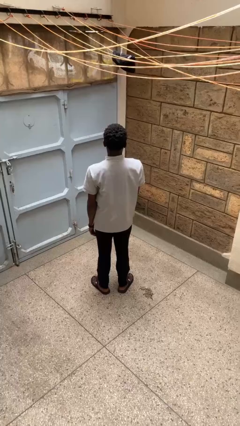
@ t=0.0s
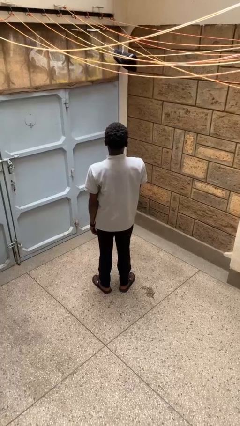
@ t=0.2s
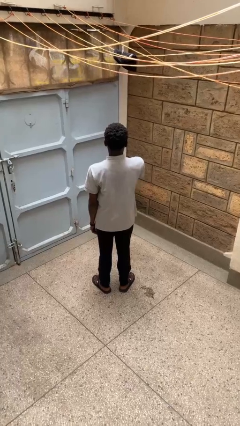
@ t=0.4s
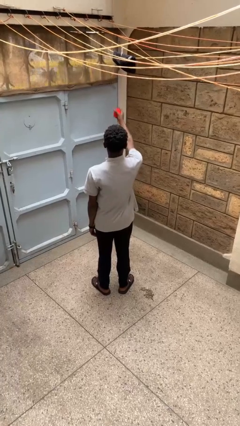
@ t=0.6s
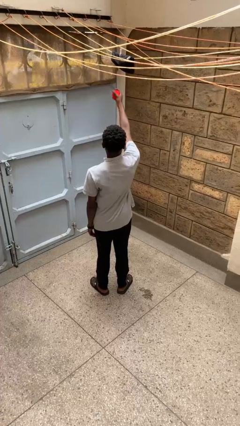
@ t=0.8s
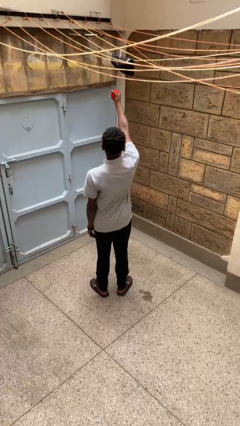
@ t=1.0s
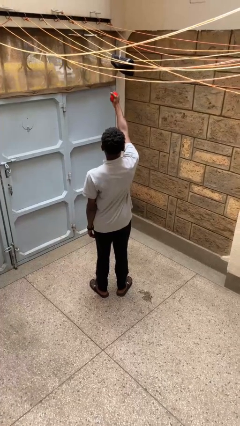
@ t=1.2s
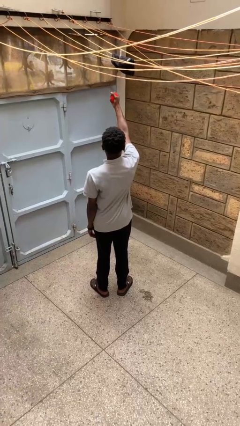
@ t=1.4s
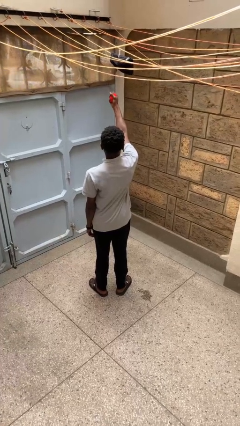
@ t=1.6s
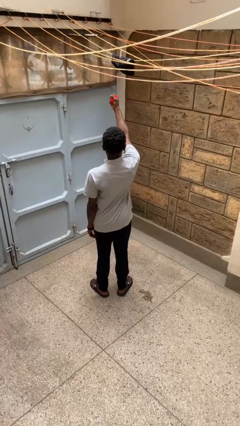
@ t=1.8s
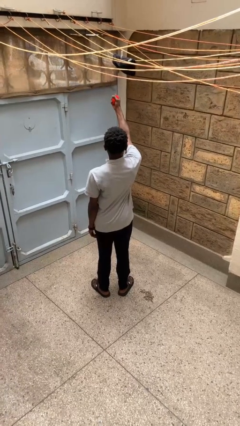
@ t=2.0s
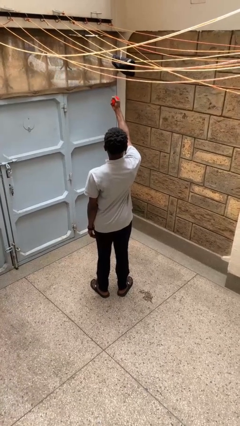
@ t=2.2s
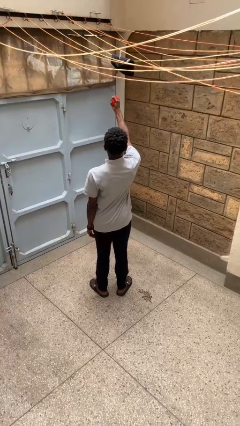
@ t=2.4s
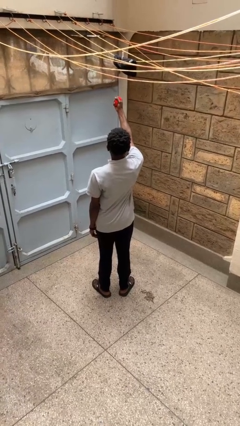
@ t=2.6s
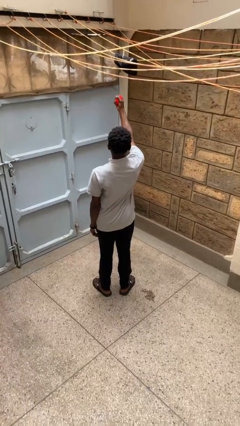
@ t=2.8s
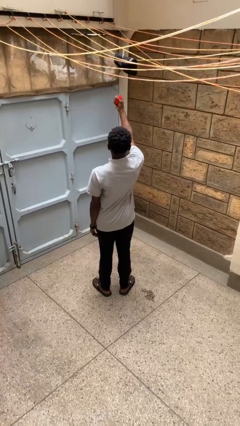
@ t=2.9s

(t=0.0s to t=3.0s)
person squeezes object

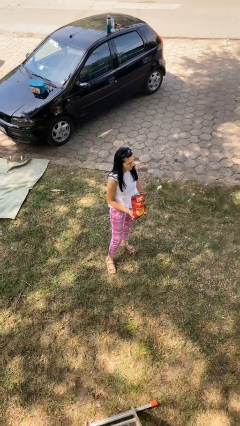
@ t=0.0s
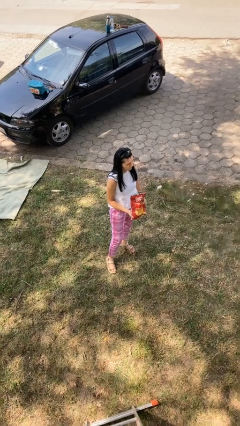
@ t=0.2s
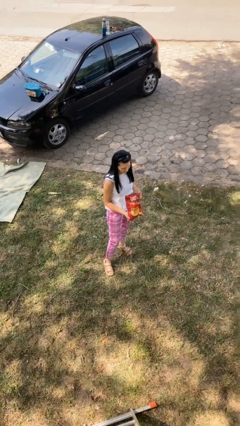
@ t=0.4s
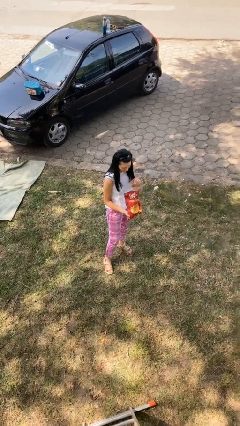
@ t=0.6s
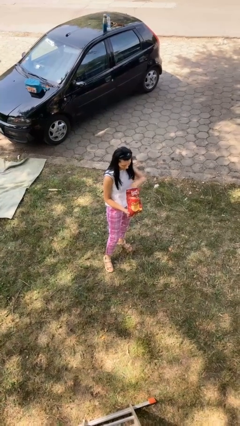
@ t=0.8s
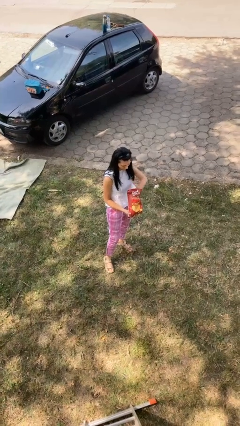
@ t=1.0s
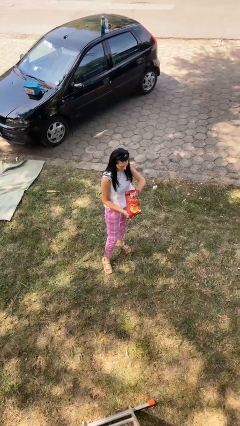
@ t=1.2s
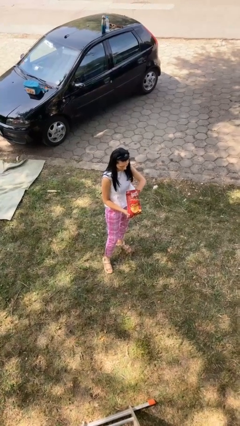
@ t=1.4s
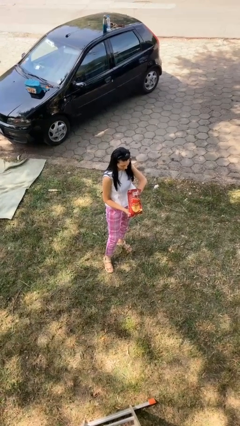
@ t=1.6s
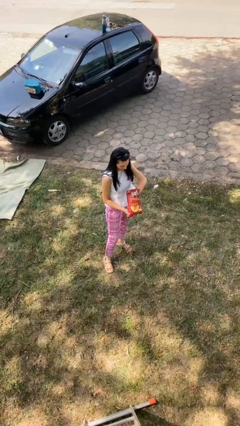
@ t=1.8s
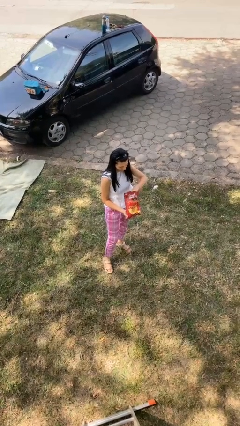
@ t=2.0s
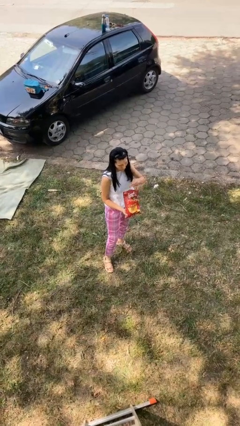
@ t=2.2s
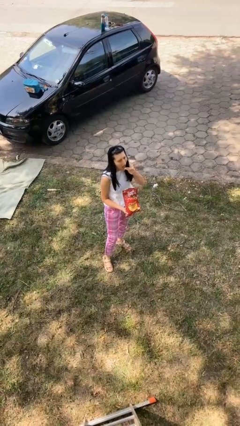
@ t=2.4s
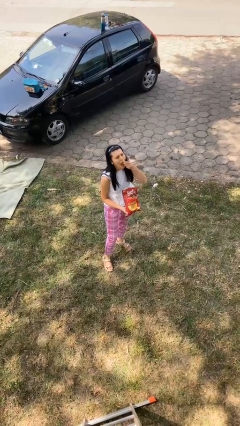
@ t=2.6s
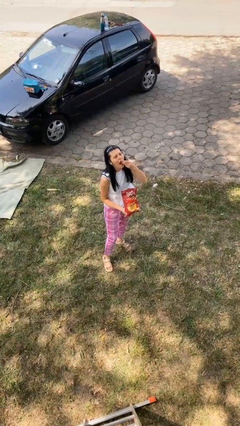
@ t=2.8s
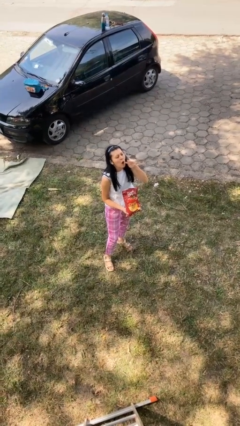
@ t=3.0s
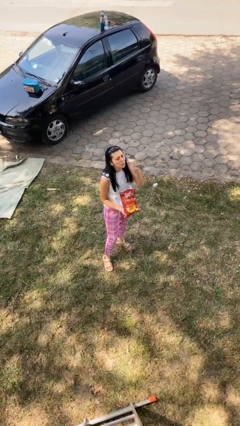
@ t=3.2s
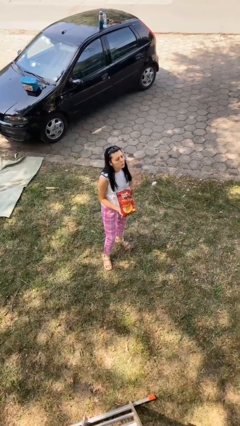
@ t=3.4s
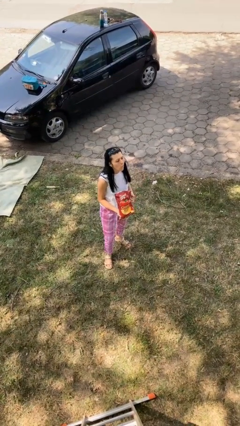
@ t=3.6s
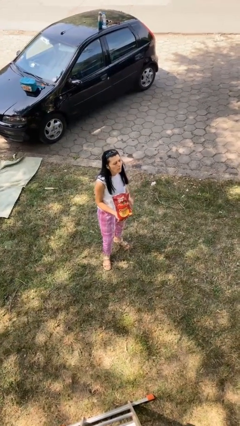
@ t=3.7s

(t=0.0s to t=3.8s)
person eats snack from bag

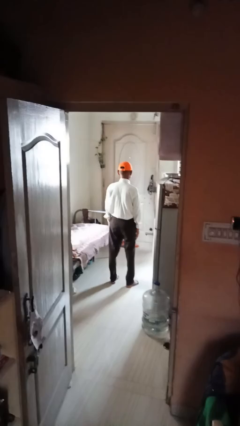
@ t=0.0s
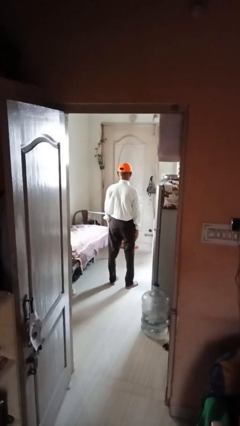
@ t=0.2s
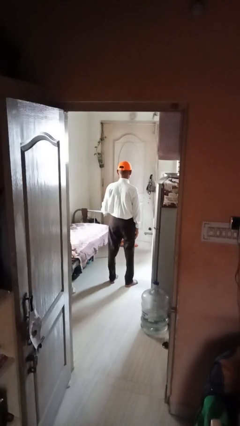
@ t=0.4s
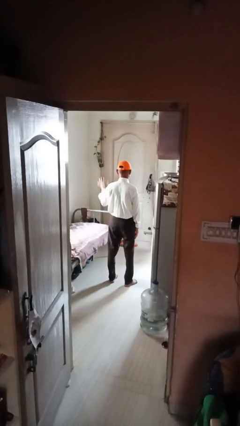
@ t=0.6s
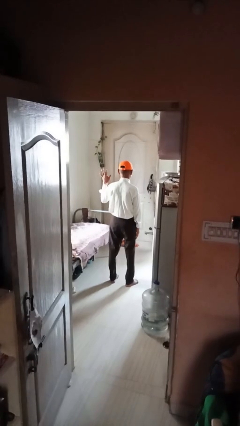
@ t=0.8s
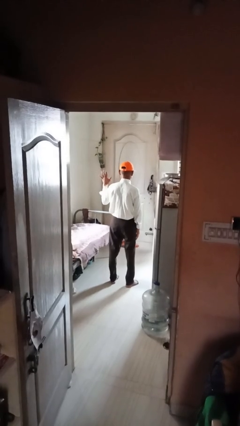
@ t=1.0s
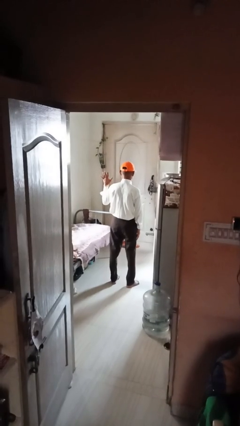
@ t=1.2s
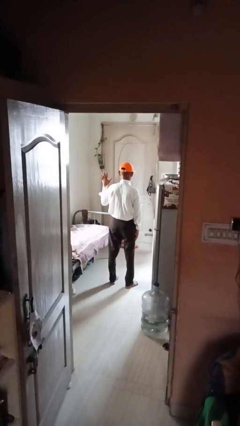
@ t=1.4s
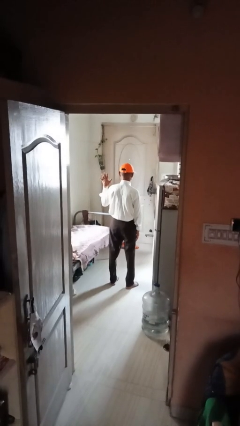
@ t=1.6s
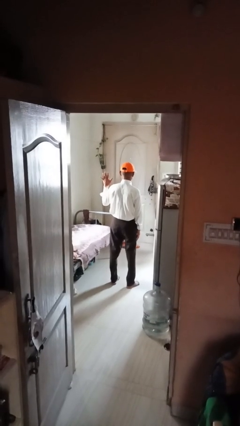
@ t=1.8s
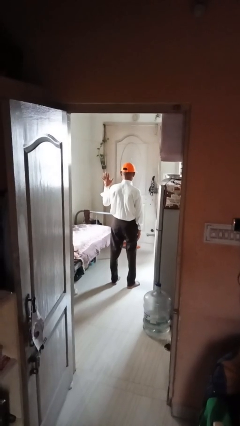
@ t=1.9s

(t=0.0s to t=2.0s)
person gestures number five

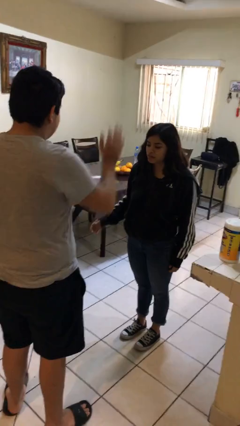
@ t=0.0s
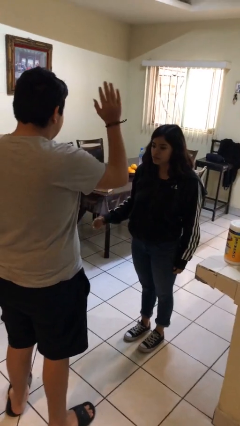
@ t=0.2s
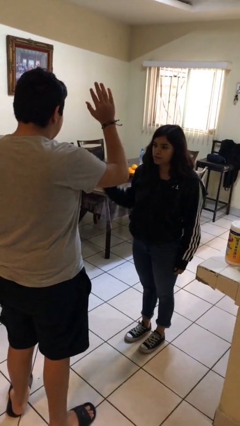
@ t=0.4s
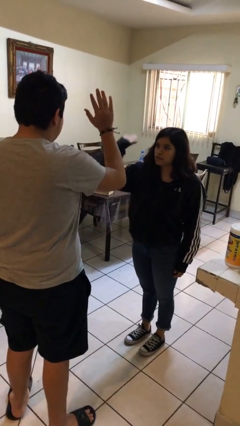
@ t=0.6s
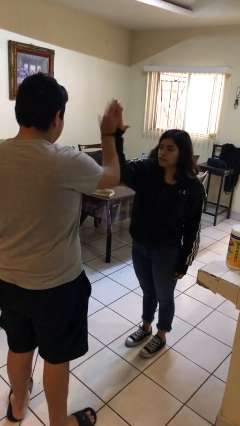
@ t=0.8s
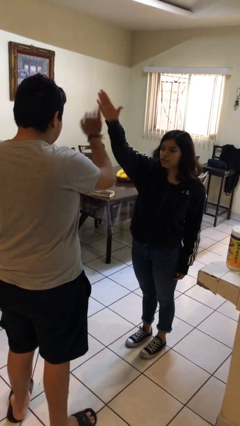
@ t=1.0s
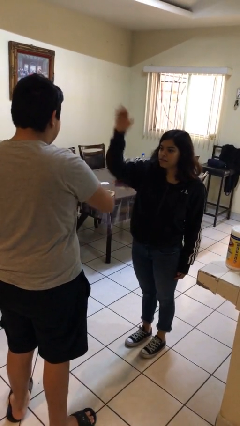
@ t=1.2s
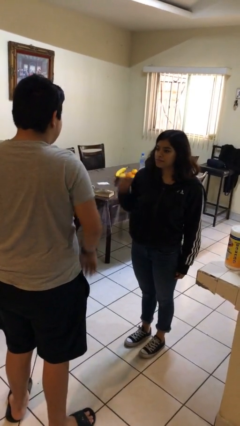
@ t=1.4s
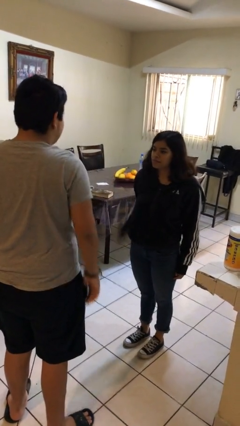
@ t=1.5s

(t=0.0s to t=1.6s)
person highfives hand

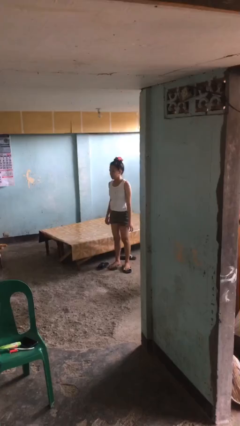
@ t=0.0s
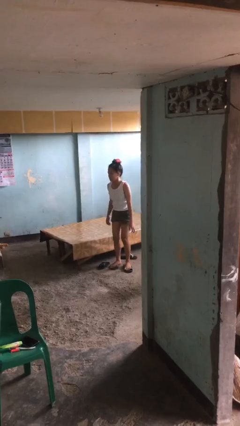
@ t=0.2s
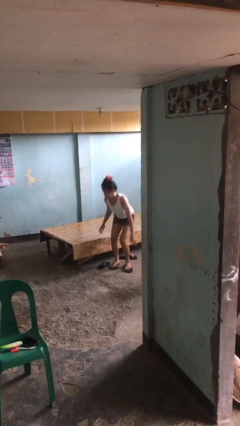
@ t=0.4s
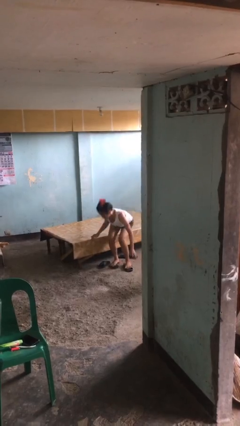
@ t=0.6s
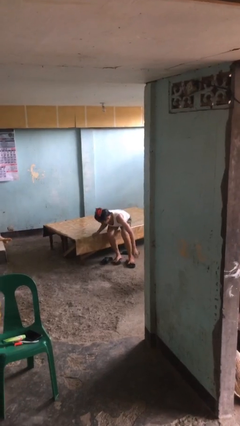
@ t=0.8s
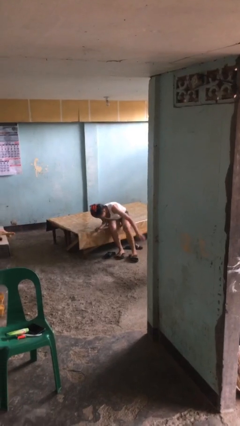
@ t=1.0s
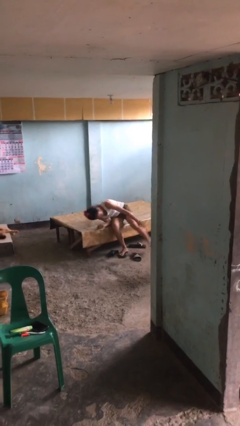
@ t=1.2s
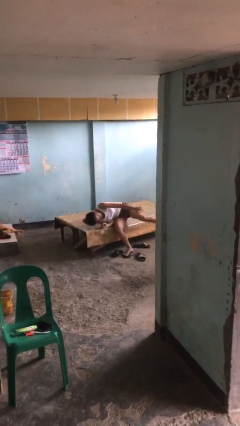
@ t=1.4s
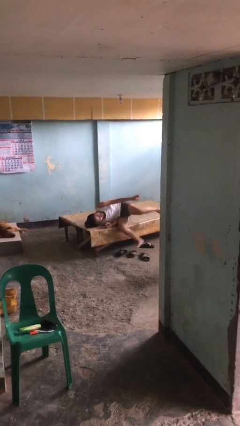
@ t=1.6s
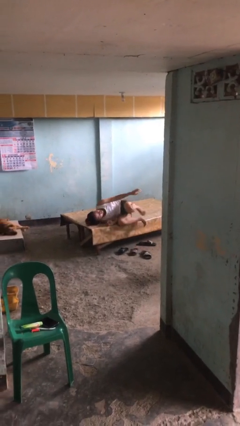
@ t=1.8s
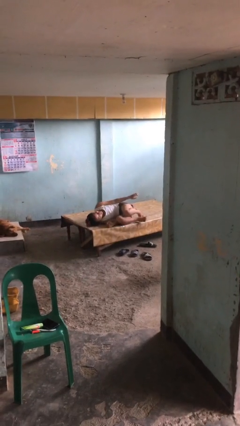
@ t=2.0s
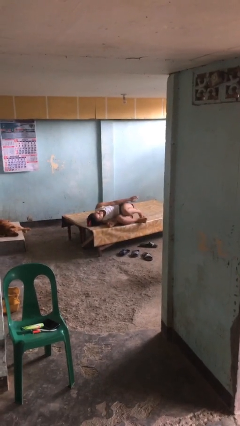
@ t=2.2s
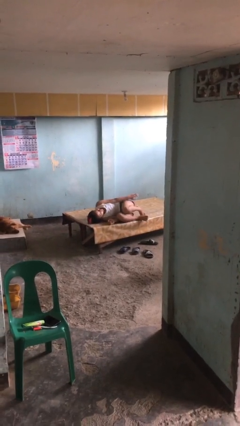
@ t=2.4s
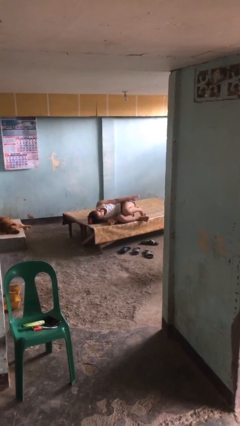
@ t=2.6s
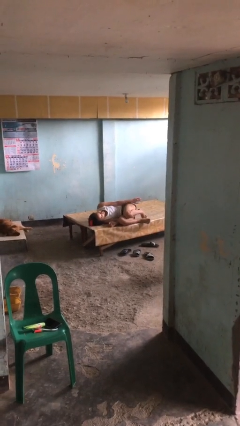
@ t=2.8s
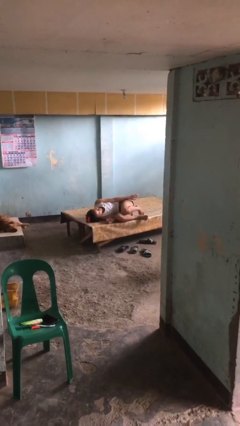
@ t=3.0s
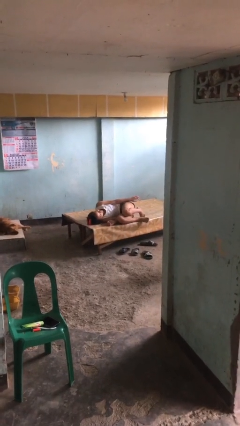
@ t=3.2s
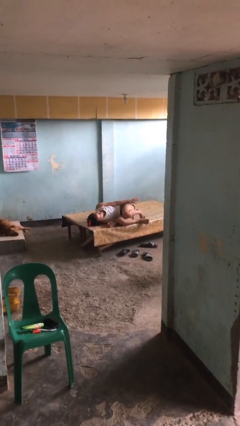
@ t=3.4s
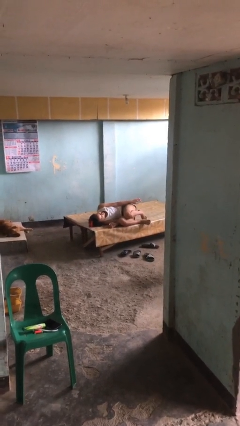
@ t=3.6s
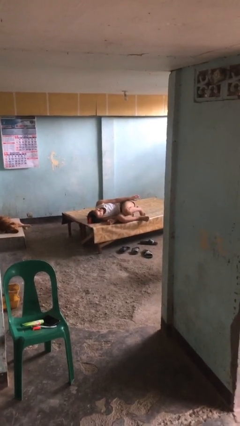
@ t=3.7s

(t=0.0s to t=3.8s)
person lies down on bed

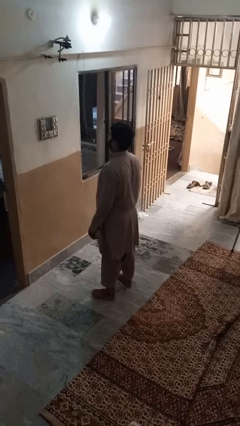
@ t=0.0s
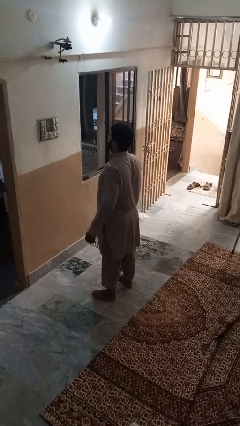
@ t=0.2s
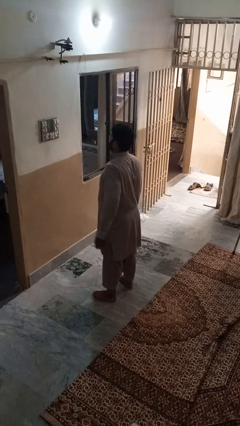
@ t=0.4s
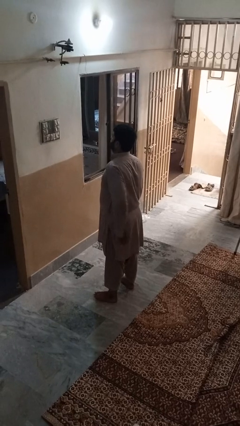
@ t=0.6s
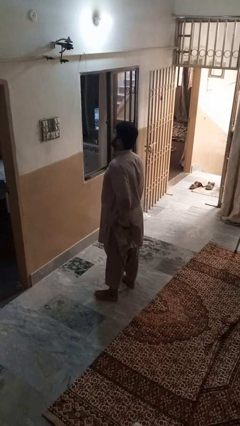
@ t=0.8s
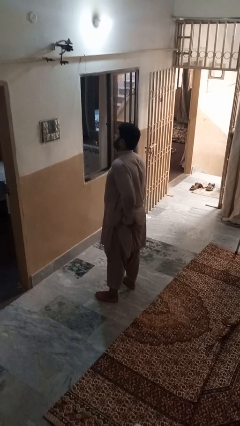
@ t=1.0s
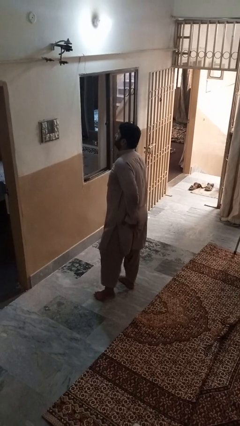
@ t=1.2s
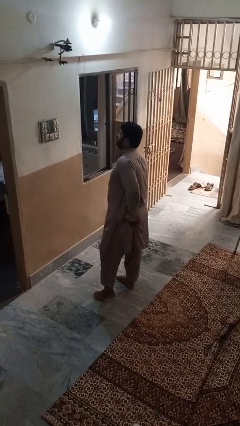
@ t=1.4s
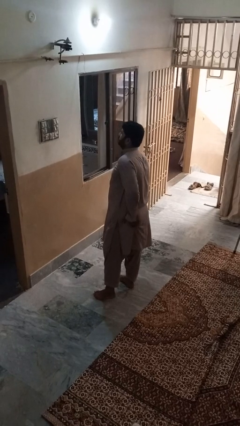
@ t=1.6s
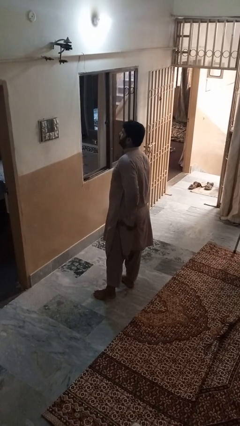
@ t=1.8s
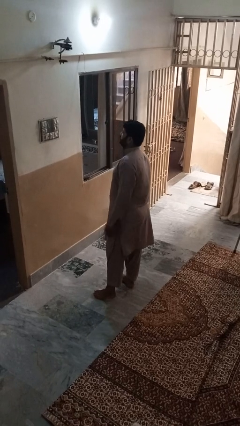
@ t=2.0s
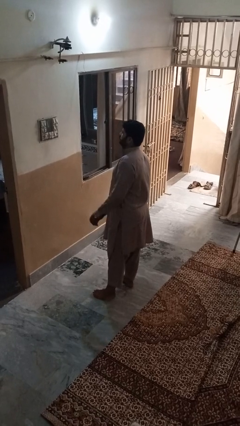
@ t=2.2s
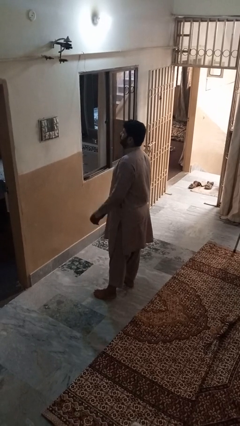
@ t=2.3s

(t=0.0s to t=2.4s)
person wiggles hips

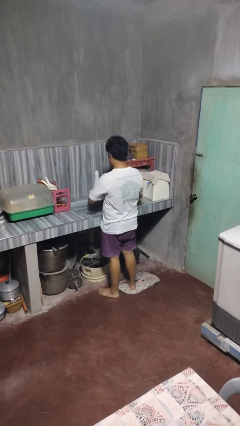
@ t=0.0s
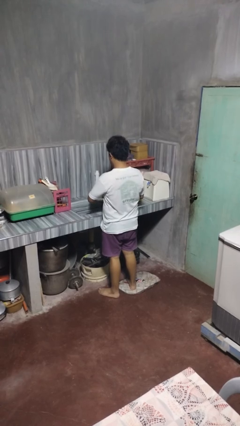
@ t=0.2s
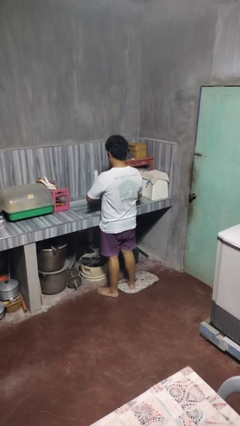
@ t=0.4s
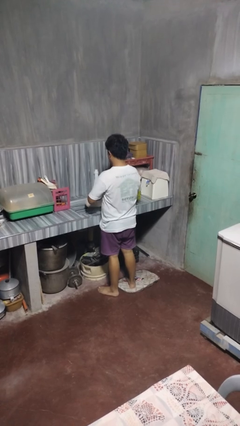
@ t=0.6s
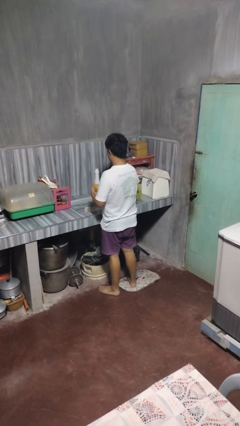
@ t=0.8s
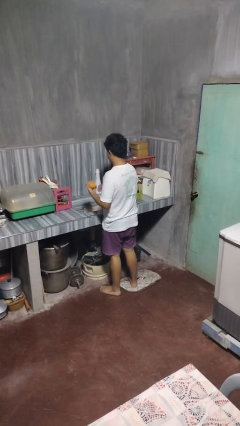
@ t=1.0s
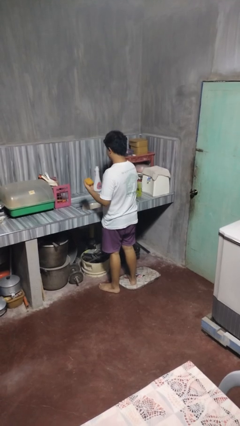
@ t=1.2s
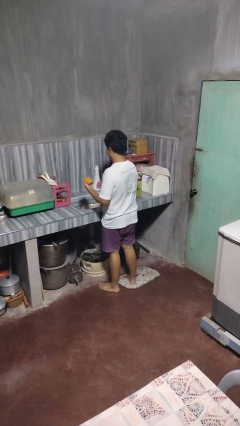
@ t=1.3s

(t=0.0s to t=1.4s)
person washes dish
